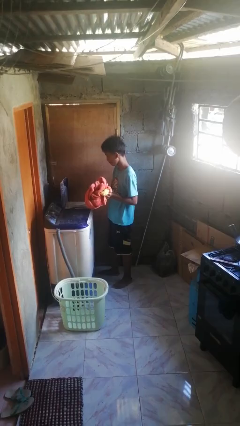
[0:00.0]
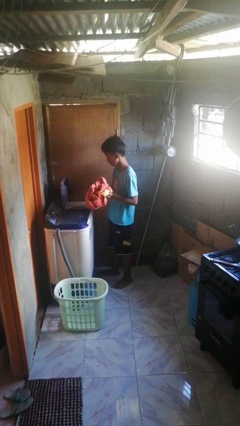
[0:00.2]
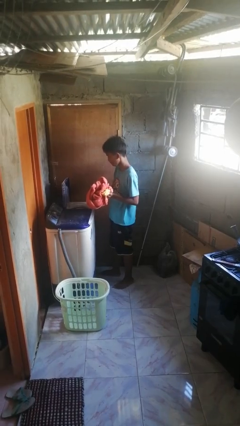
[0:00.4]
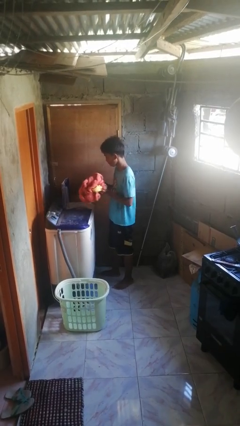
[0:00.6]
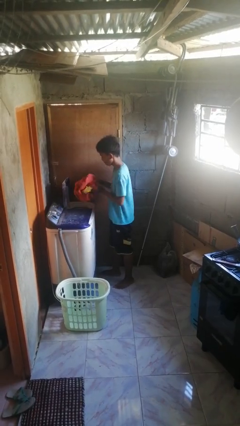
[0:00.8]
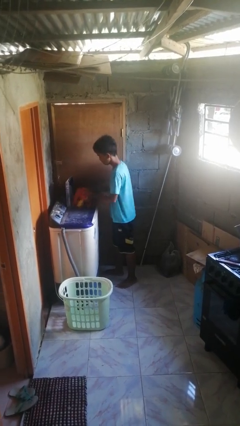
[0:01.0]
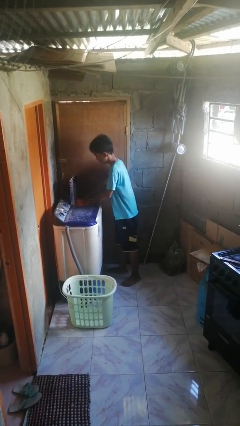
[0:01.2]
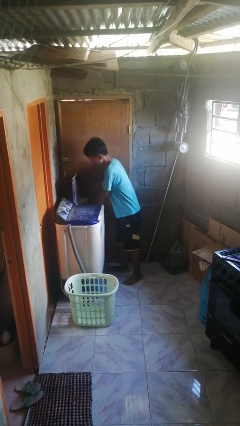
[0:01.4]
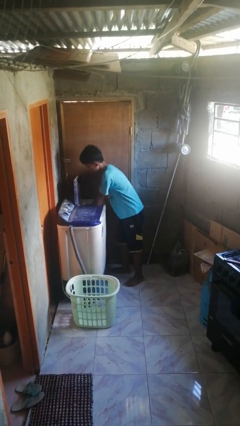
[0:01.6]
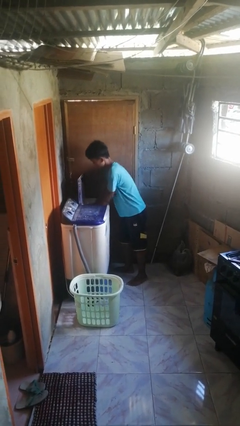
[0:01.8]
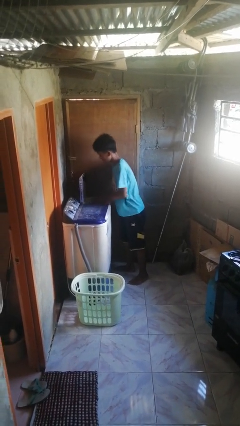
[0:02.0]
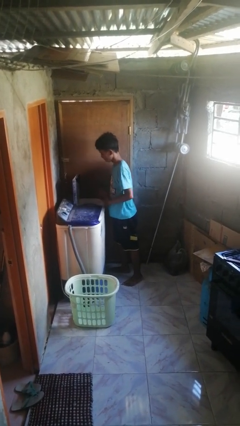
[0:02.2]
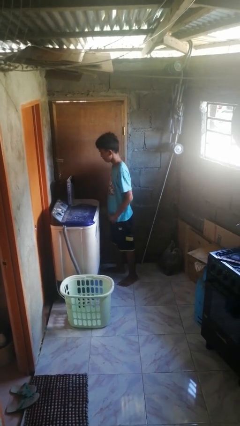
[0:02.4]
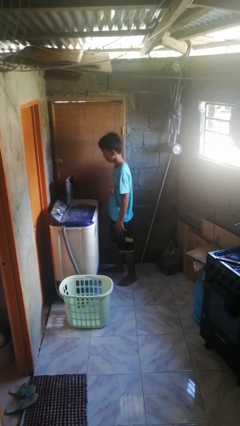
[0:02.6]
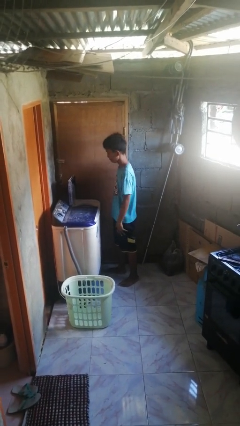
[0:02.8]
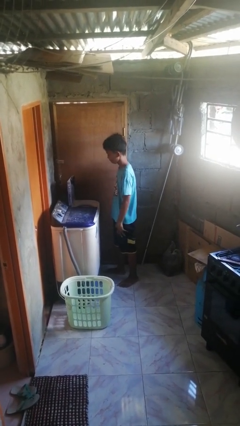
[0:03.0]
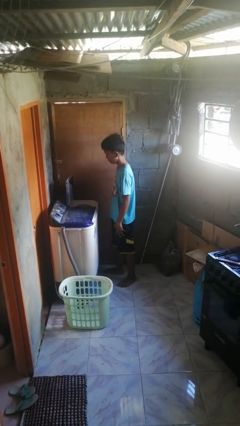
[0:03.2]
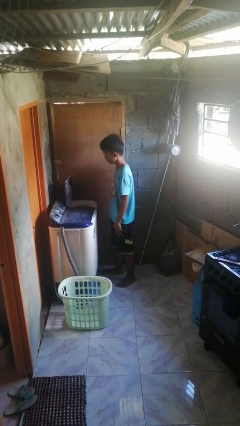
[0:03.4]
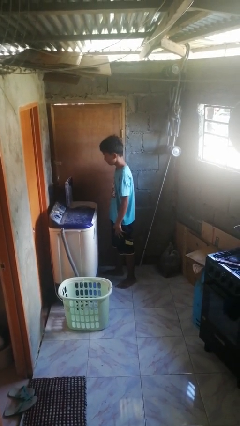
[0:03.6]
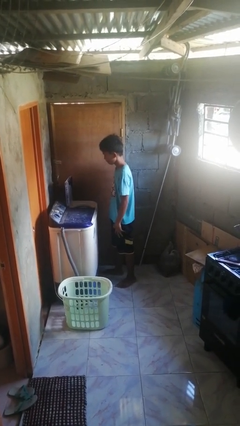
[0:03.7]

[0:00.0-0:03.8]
person loads dryer

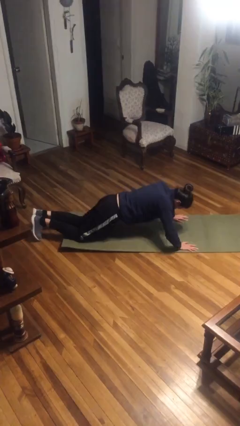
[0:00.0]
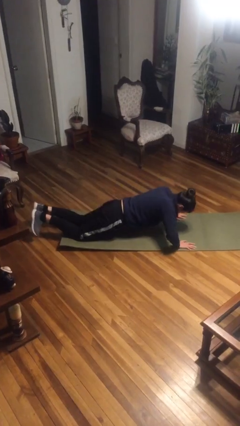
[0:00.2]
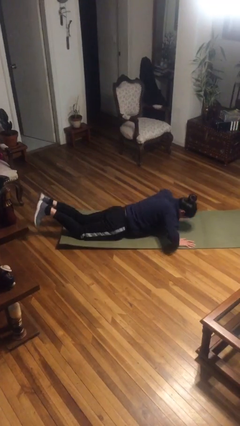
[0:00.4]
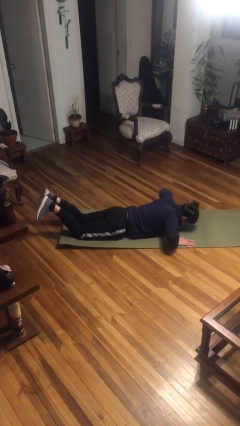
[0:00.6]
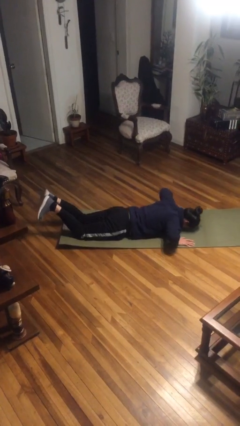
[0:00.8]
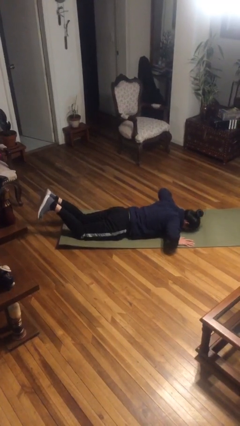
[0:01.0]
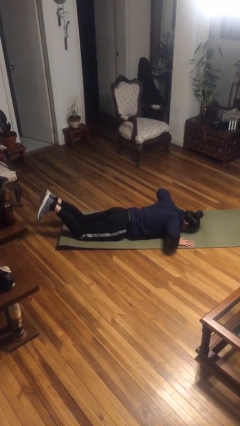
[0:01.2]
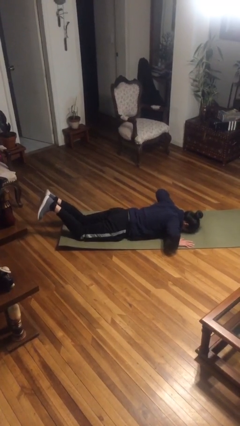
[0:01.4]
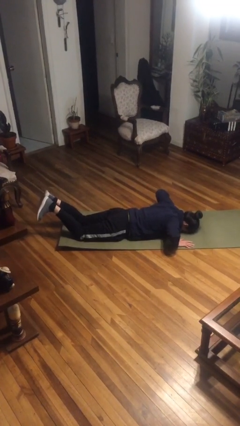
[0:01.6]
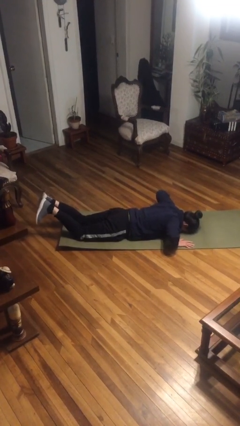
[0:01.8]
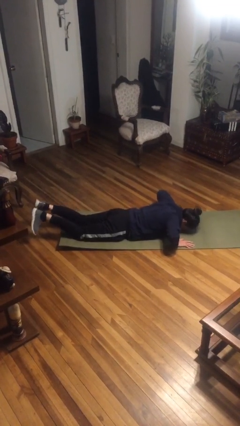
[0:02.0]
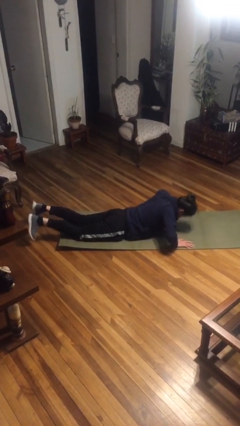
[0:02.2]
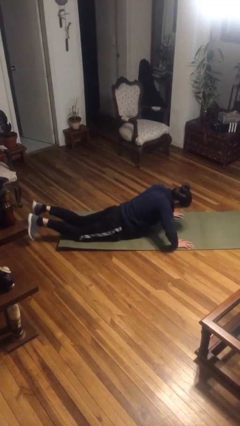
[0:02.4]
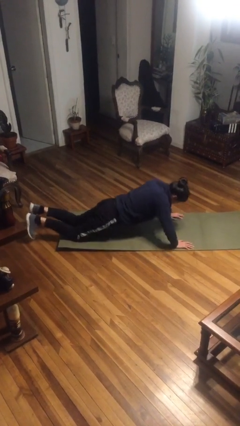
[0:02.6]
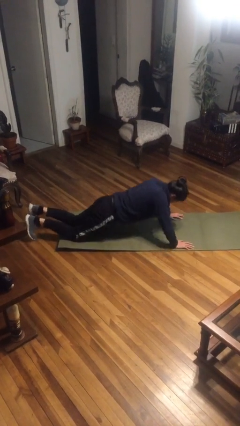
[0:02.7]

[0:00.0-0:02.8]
person exercises with pushup

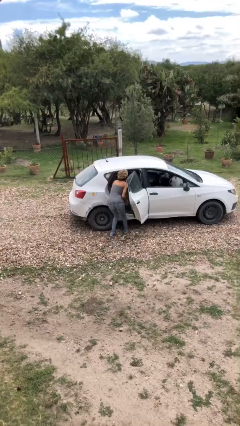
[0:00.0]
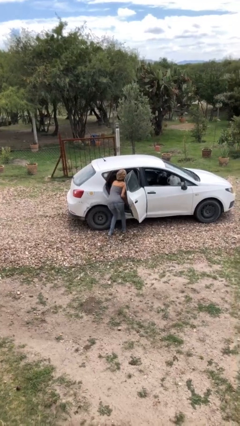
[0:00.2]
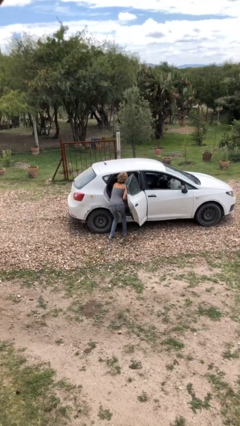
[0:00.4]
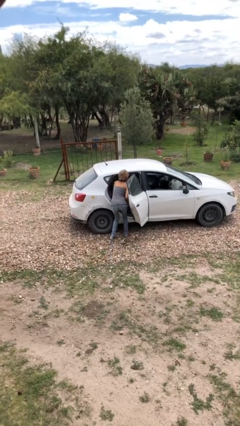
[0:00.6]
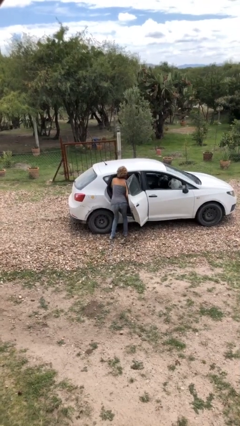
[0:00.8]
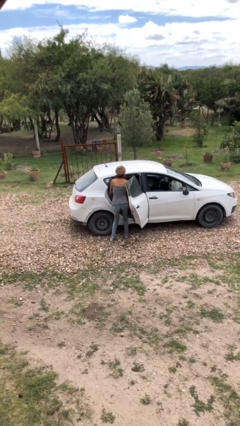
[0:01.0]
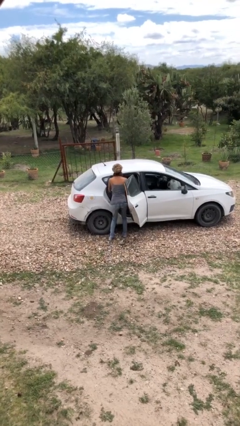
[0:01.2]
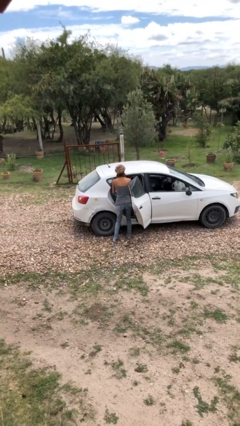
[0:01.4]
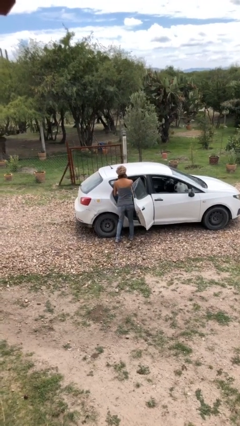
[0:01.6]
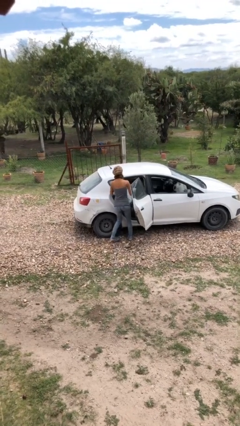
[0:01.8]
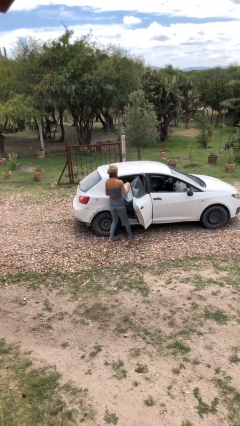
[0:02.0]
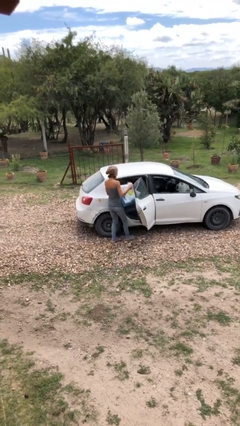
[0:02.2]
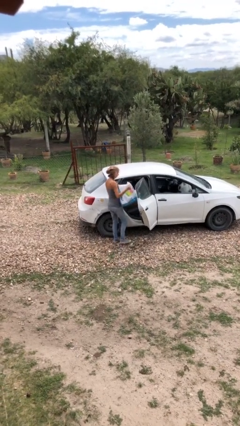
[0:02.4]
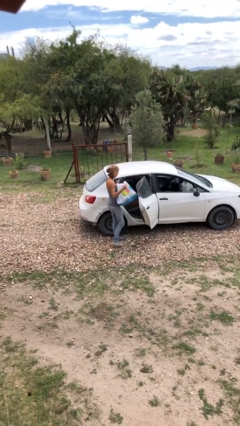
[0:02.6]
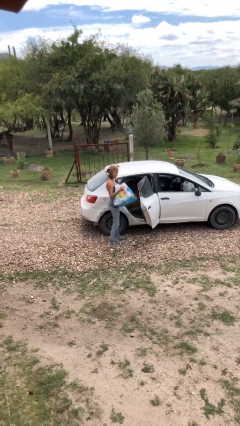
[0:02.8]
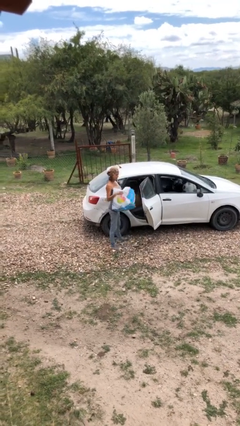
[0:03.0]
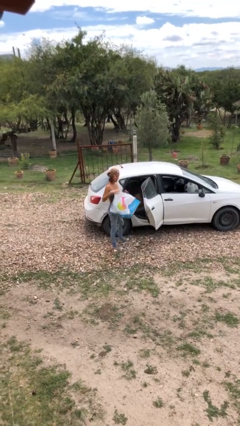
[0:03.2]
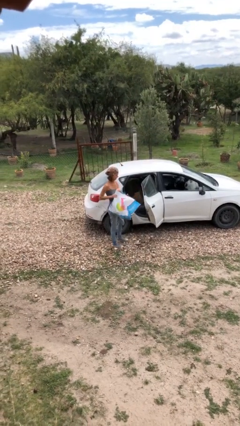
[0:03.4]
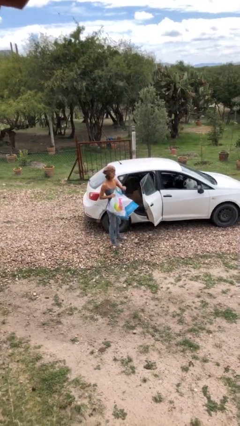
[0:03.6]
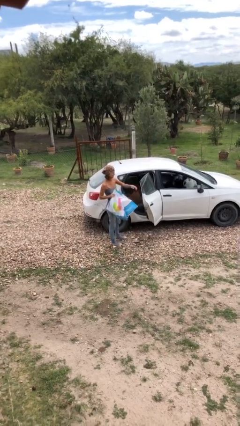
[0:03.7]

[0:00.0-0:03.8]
person unloads car

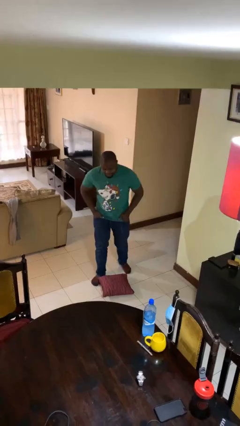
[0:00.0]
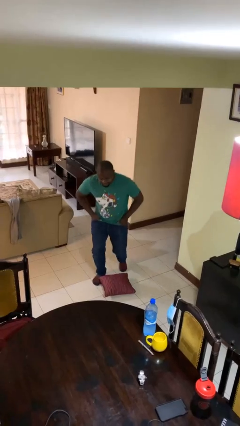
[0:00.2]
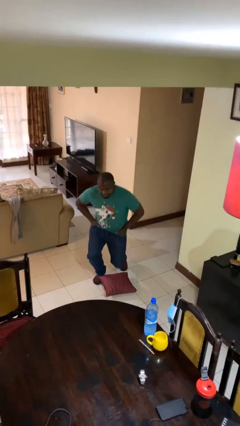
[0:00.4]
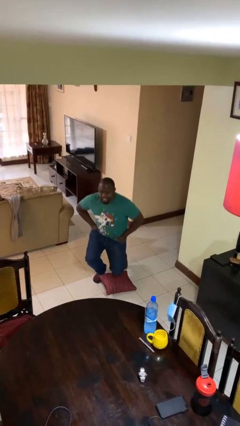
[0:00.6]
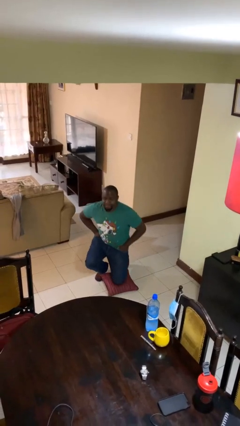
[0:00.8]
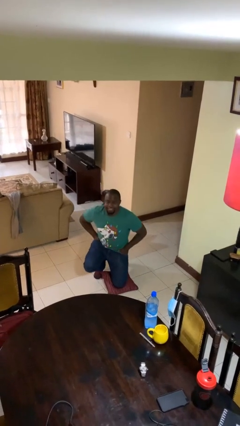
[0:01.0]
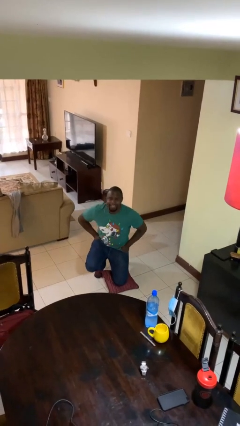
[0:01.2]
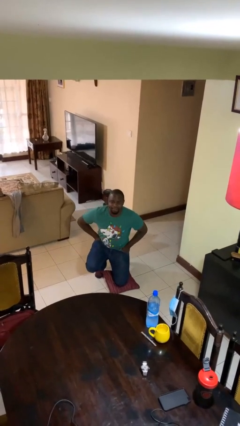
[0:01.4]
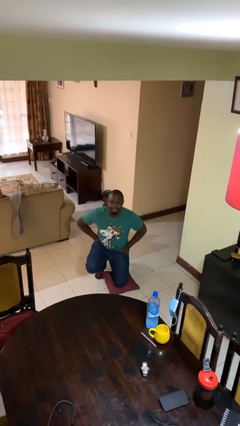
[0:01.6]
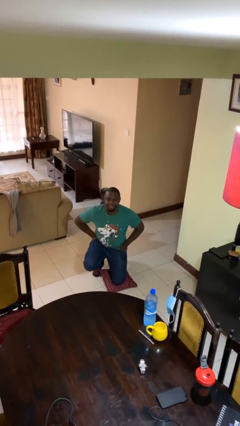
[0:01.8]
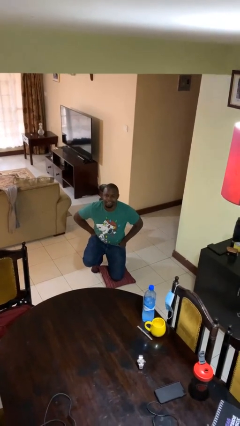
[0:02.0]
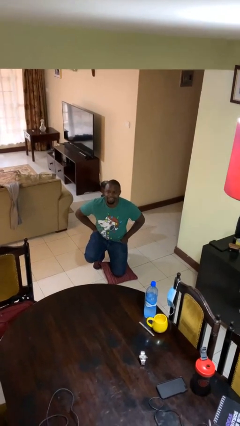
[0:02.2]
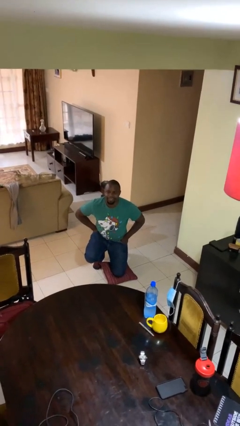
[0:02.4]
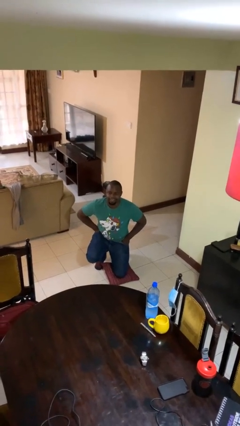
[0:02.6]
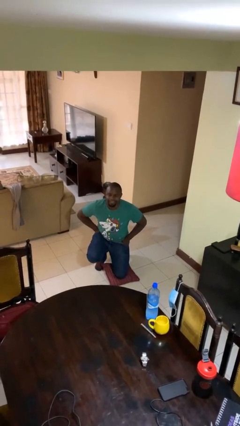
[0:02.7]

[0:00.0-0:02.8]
person kneels

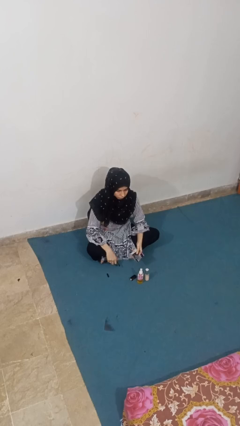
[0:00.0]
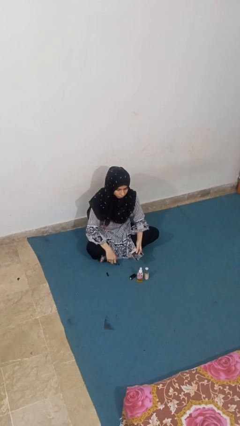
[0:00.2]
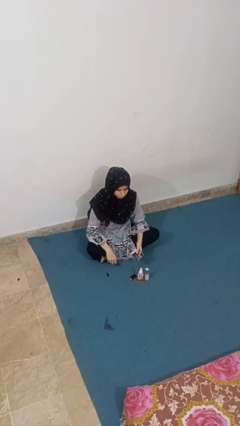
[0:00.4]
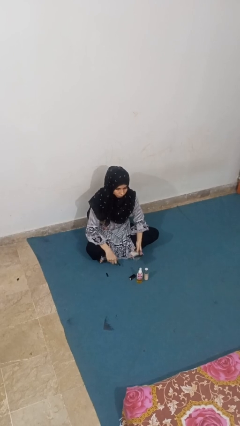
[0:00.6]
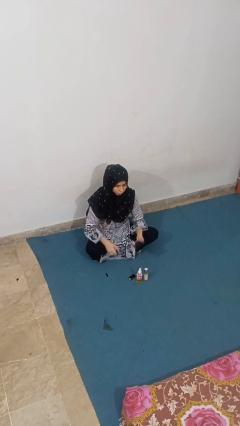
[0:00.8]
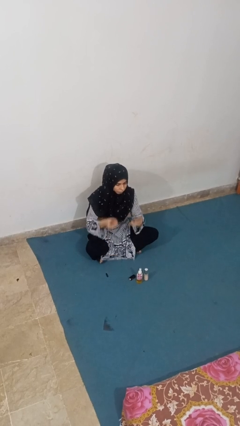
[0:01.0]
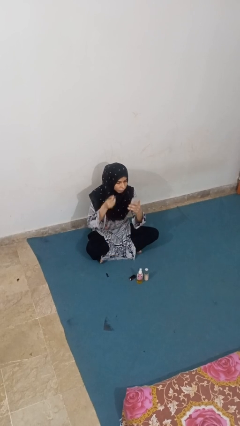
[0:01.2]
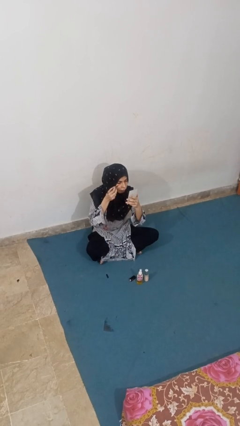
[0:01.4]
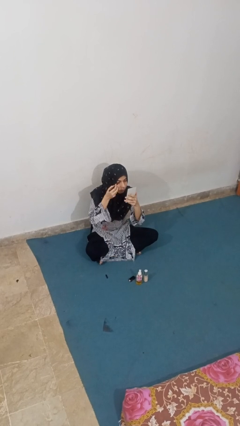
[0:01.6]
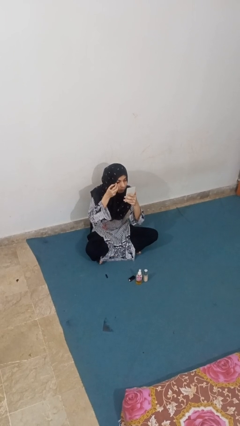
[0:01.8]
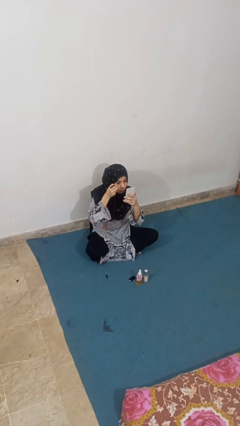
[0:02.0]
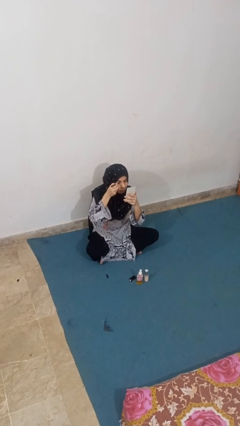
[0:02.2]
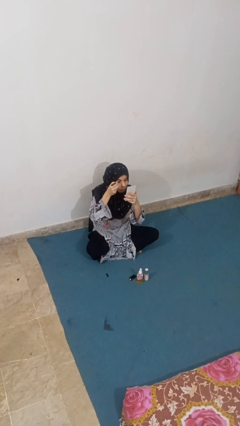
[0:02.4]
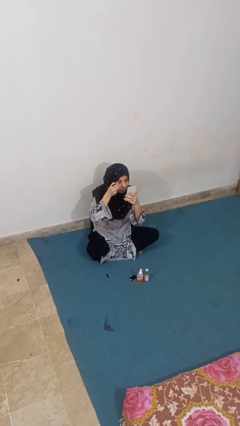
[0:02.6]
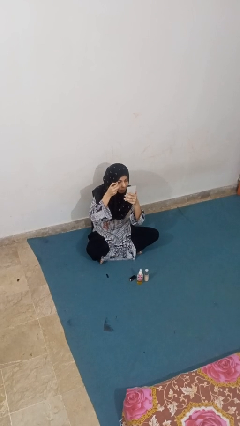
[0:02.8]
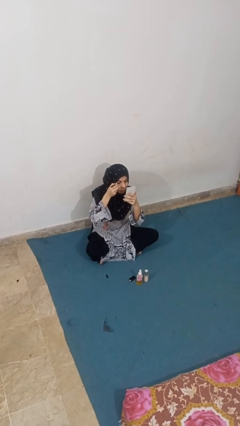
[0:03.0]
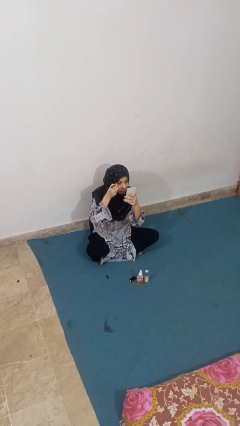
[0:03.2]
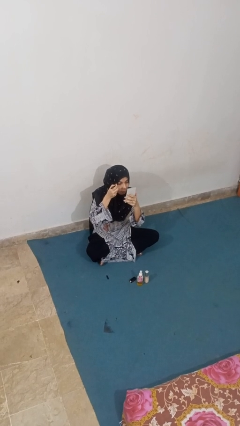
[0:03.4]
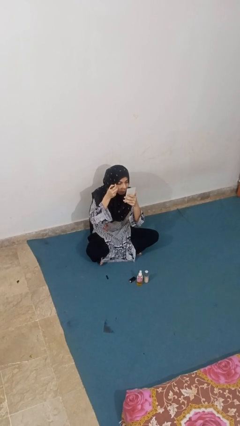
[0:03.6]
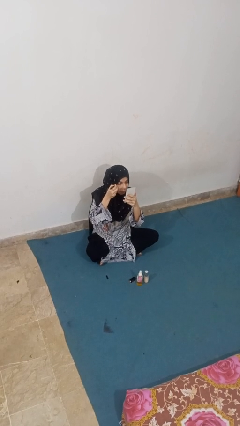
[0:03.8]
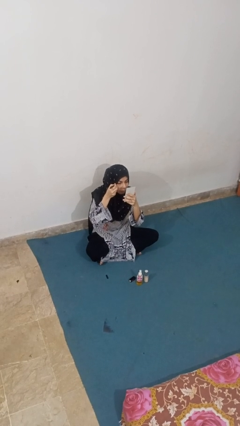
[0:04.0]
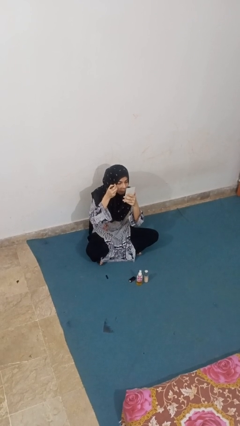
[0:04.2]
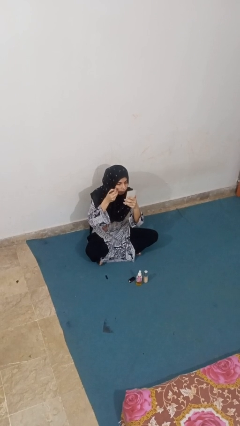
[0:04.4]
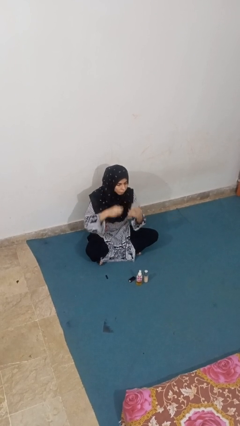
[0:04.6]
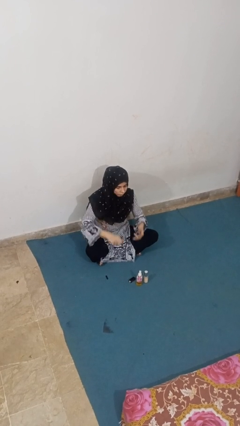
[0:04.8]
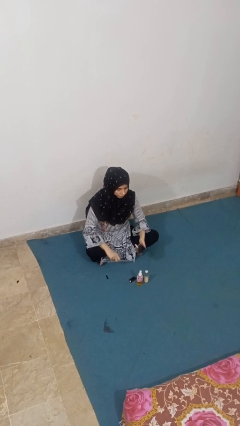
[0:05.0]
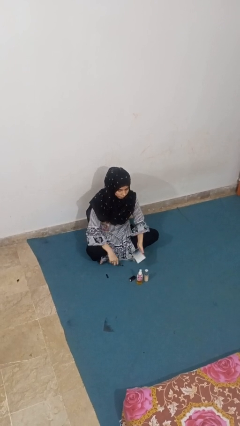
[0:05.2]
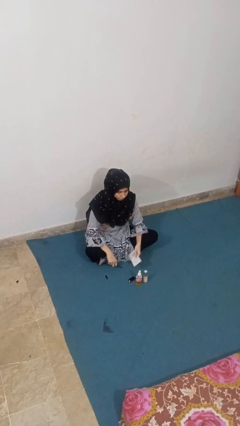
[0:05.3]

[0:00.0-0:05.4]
person applies eye makeup
